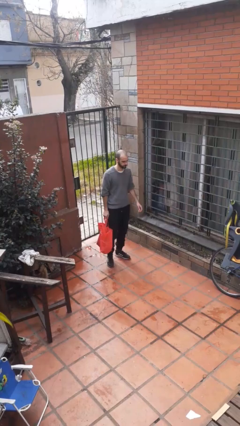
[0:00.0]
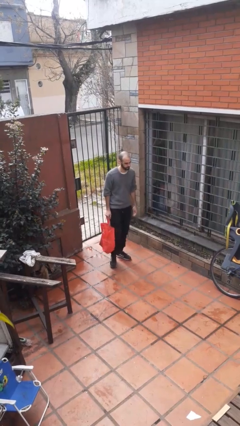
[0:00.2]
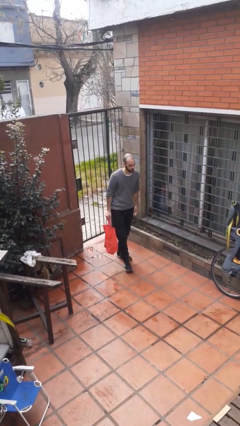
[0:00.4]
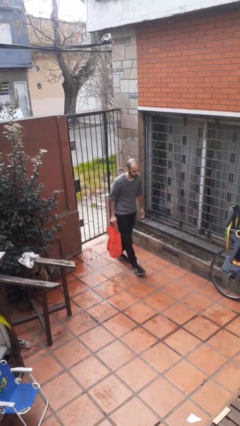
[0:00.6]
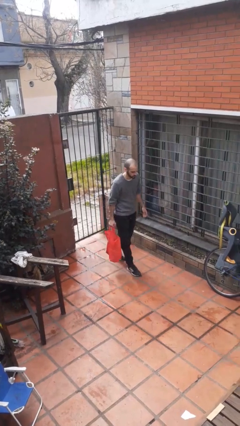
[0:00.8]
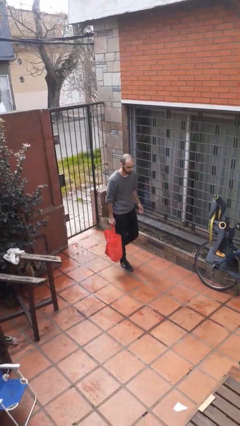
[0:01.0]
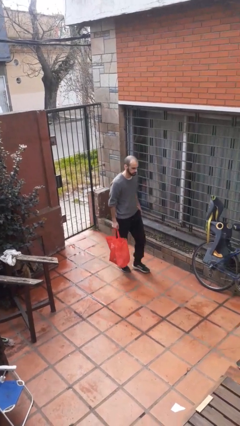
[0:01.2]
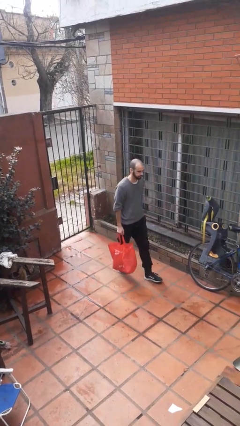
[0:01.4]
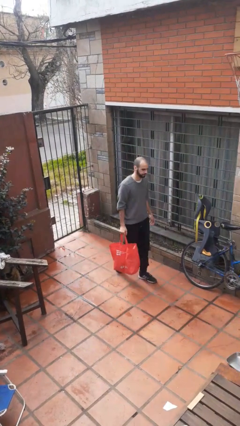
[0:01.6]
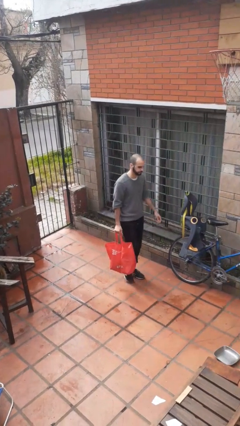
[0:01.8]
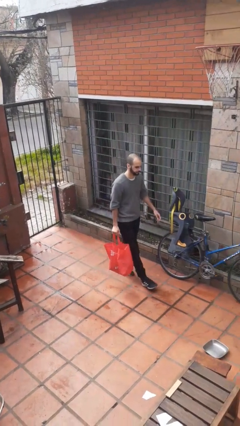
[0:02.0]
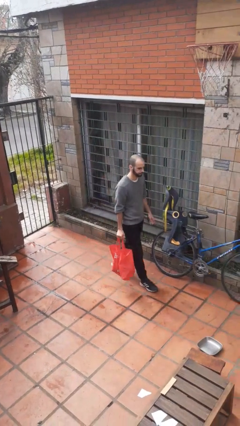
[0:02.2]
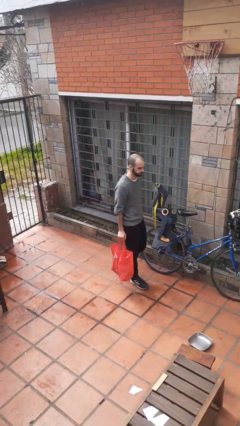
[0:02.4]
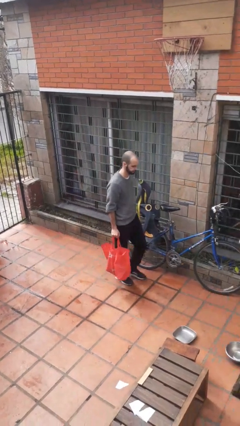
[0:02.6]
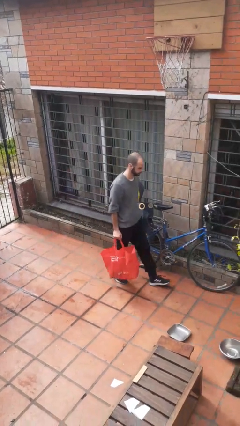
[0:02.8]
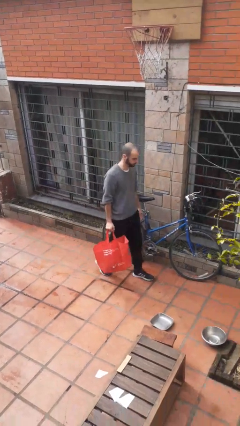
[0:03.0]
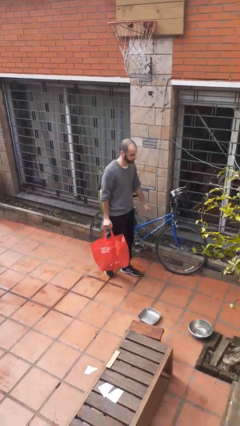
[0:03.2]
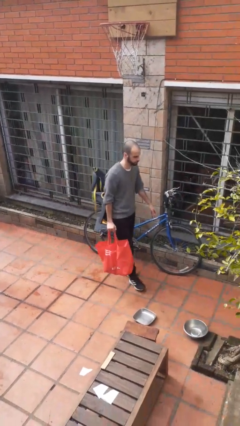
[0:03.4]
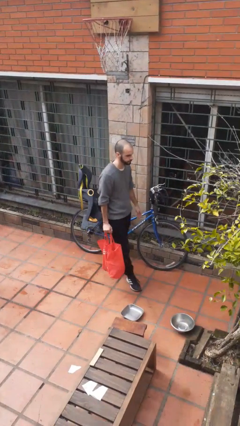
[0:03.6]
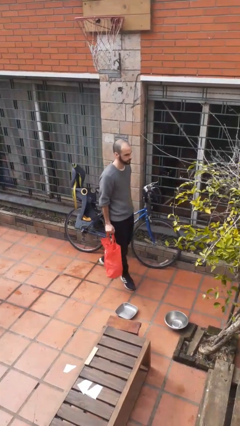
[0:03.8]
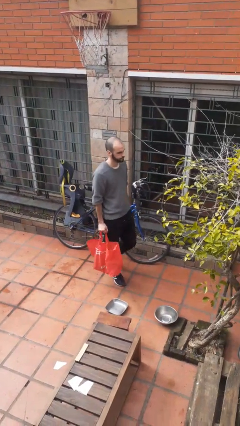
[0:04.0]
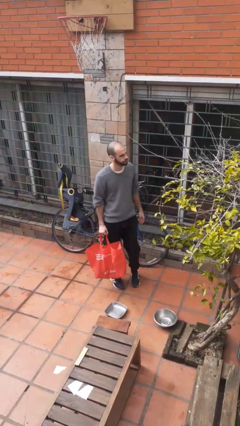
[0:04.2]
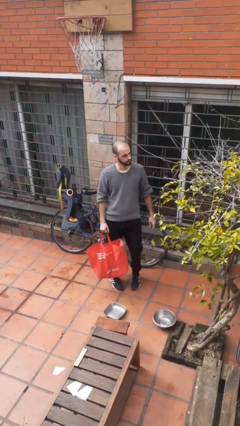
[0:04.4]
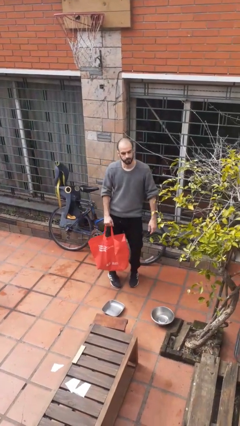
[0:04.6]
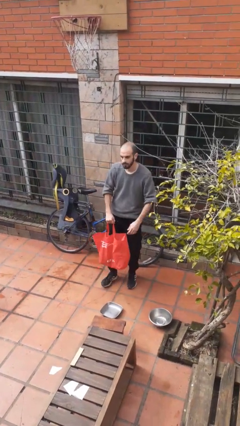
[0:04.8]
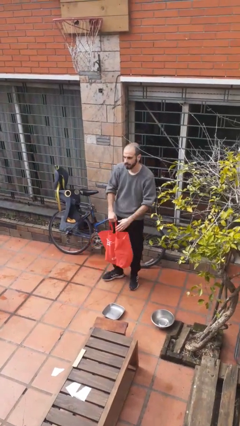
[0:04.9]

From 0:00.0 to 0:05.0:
person carries groceries

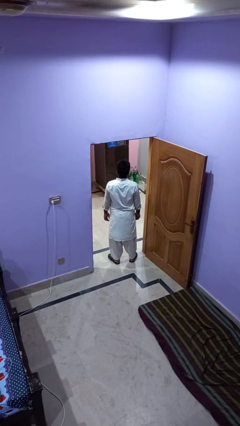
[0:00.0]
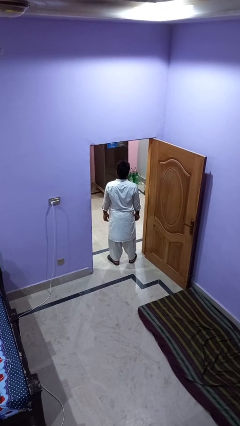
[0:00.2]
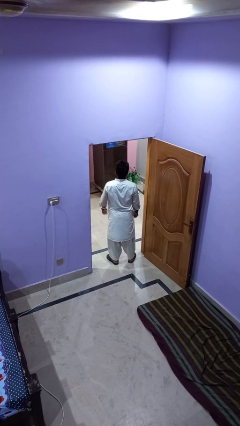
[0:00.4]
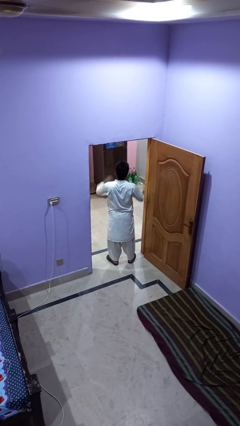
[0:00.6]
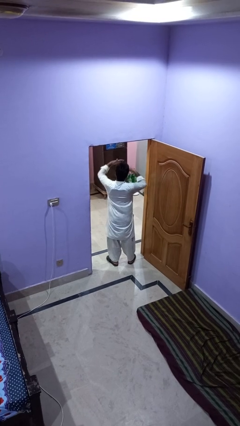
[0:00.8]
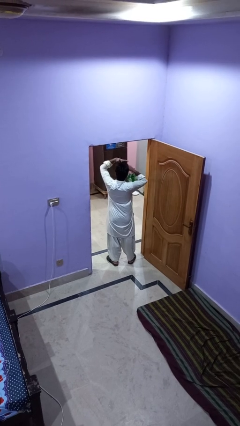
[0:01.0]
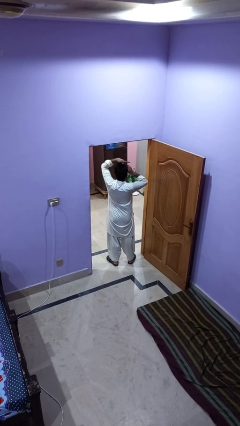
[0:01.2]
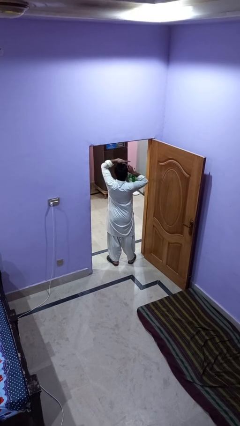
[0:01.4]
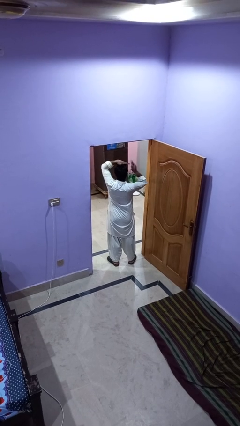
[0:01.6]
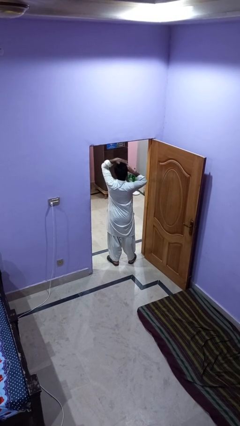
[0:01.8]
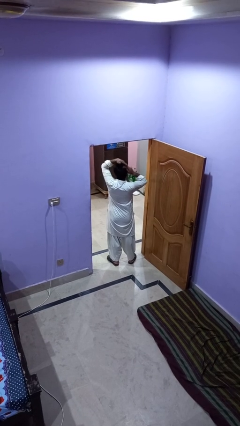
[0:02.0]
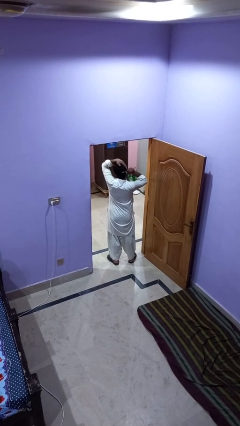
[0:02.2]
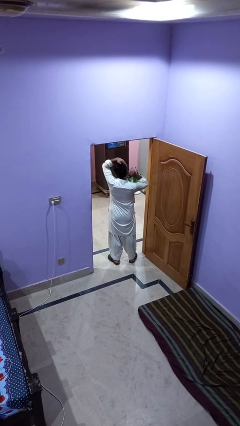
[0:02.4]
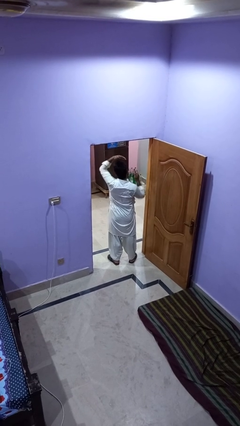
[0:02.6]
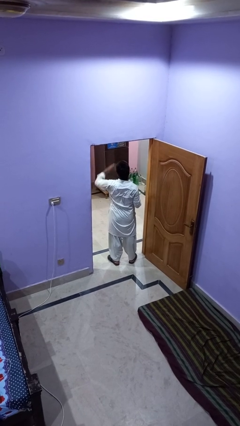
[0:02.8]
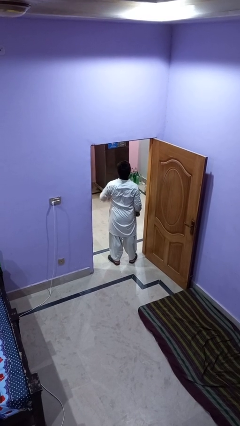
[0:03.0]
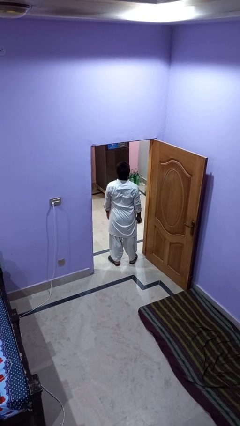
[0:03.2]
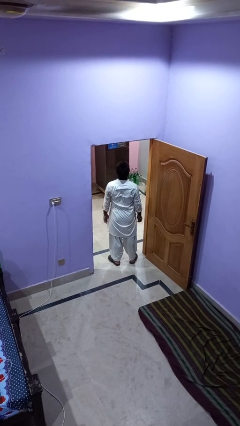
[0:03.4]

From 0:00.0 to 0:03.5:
person brushes hair

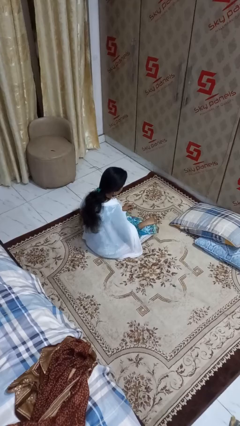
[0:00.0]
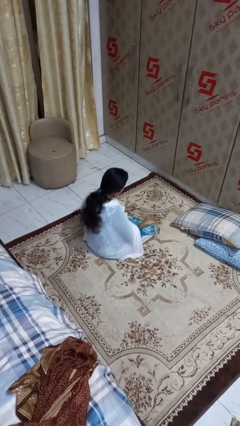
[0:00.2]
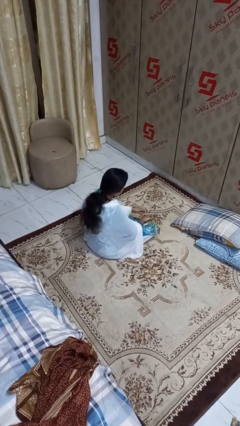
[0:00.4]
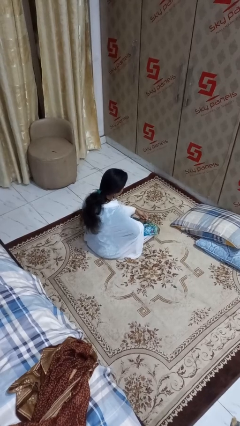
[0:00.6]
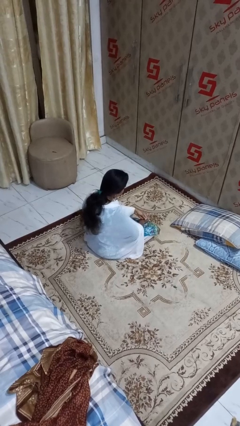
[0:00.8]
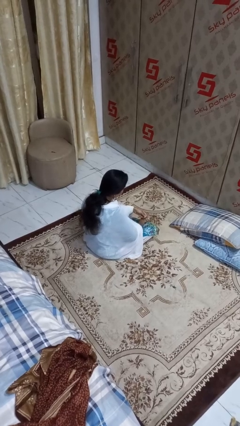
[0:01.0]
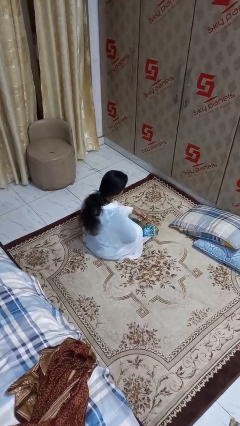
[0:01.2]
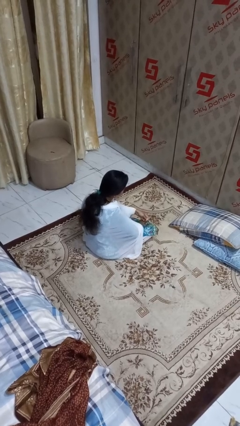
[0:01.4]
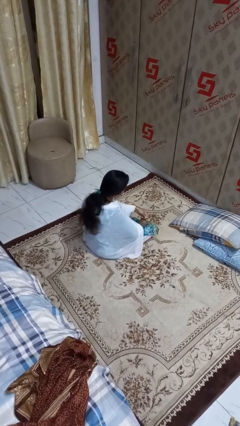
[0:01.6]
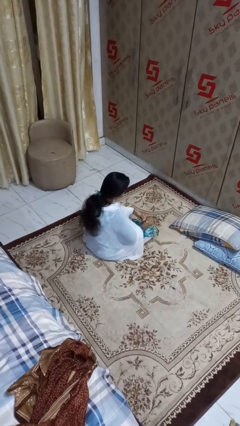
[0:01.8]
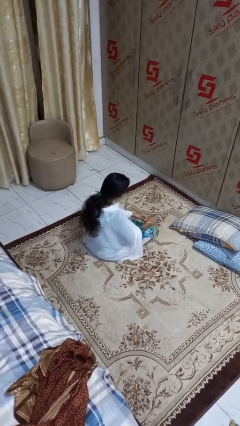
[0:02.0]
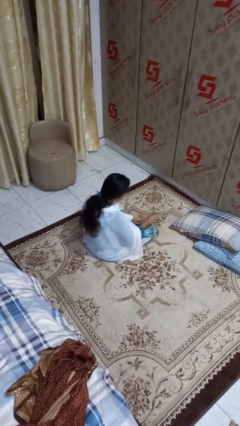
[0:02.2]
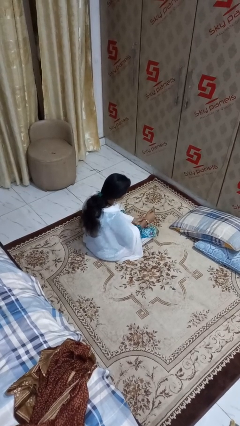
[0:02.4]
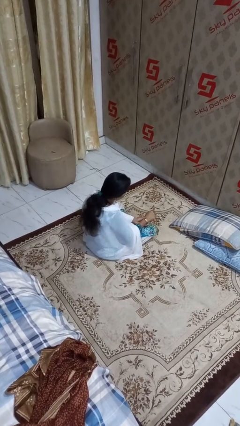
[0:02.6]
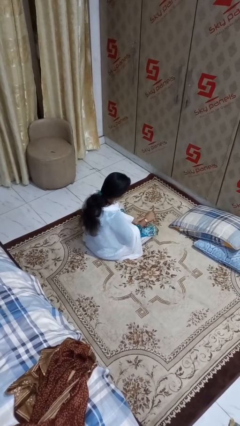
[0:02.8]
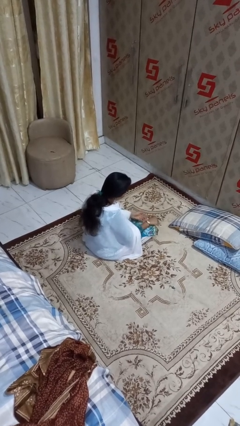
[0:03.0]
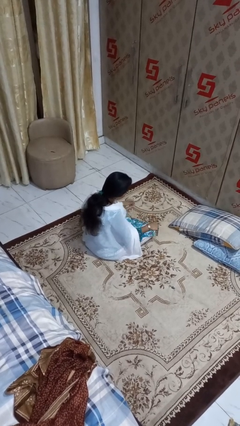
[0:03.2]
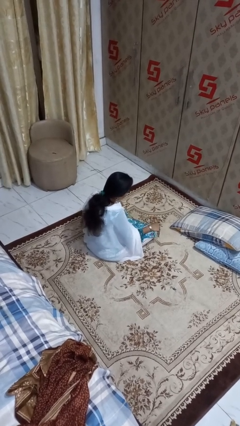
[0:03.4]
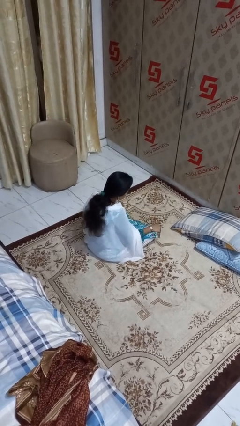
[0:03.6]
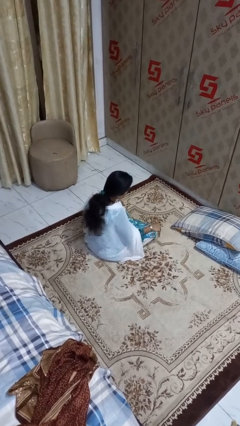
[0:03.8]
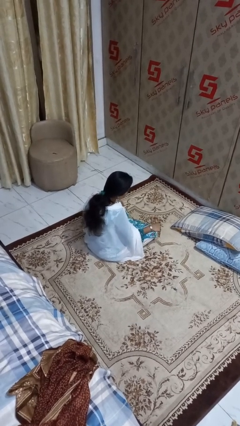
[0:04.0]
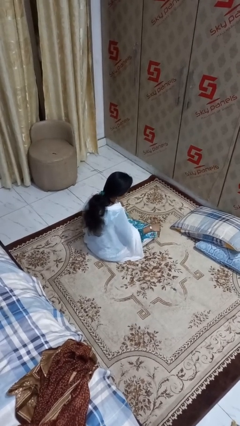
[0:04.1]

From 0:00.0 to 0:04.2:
person puts on wristwatch

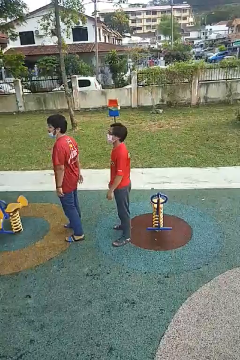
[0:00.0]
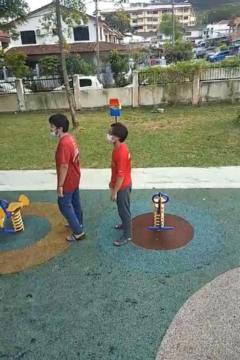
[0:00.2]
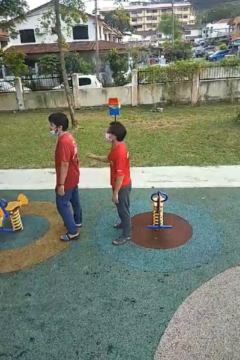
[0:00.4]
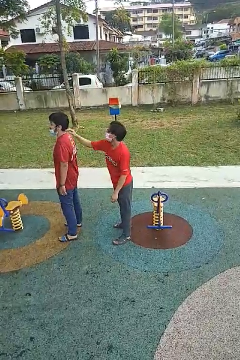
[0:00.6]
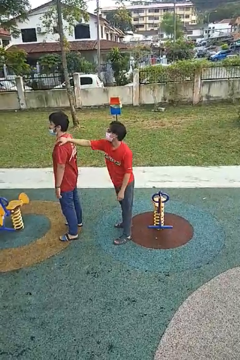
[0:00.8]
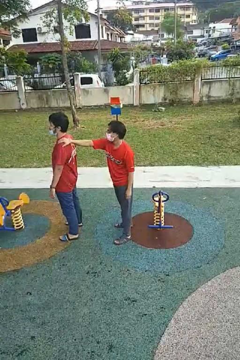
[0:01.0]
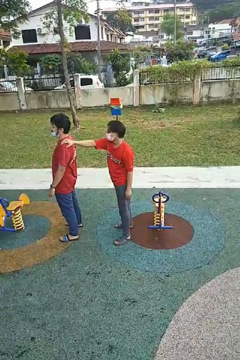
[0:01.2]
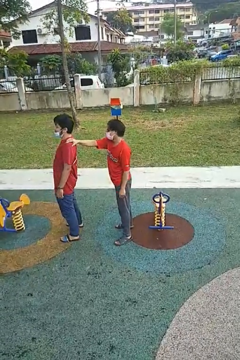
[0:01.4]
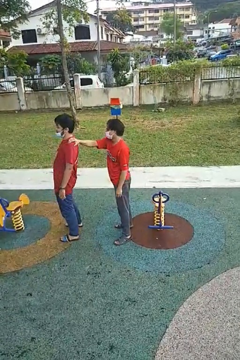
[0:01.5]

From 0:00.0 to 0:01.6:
person grabs person by shoulder

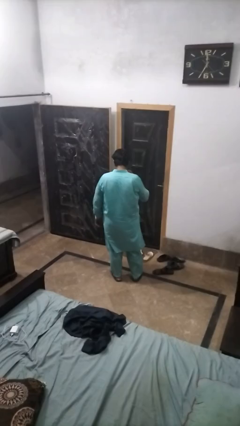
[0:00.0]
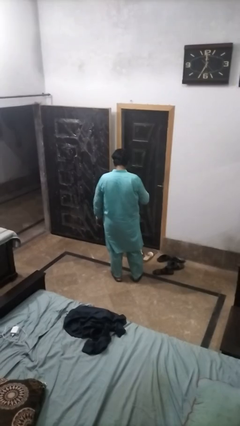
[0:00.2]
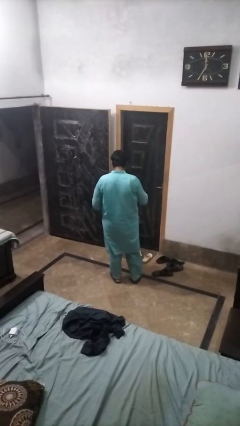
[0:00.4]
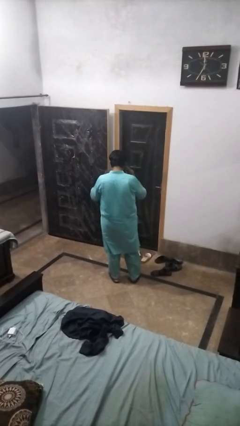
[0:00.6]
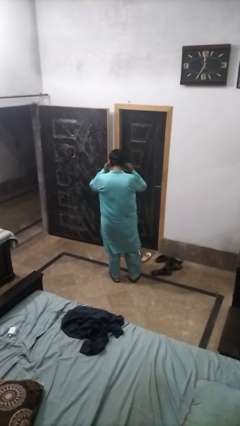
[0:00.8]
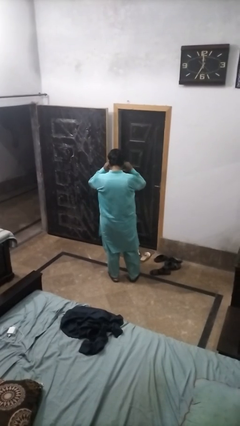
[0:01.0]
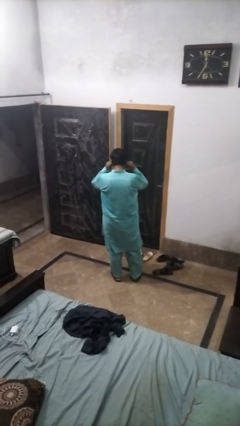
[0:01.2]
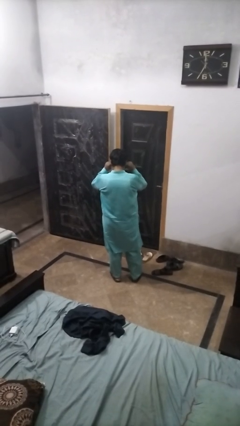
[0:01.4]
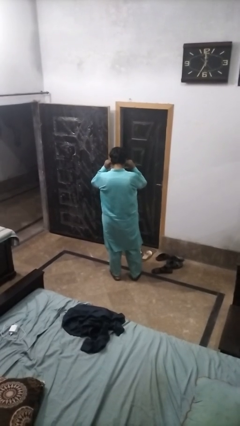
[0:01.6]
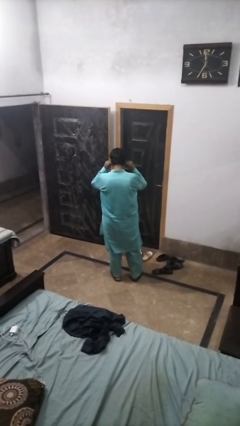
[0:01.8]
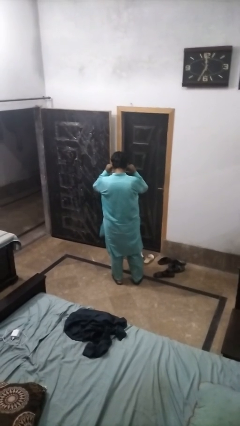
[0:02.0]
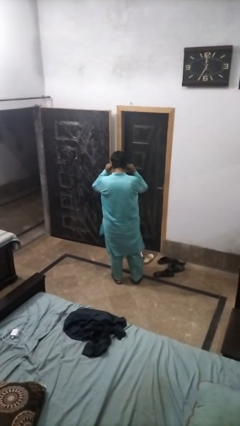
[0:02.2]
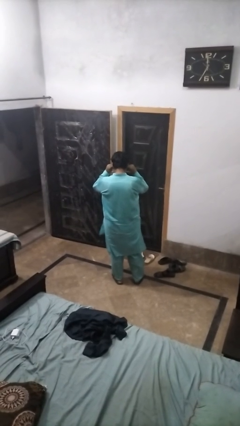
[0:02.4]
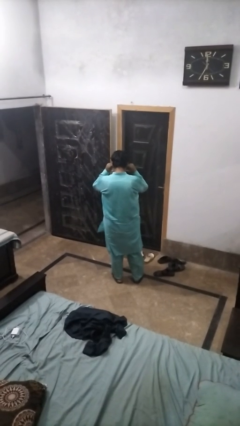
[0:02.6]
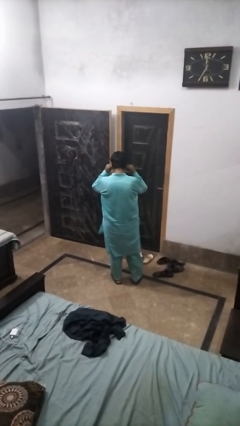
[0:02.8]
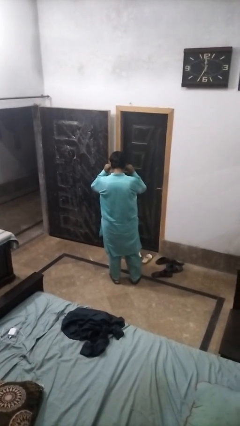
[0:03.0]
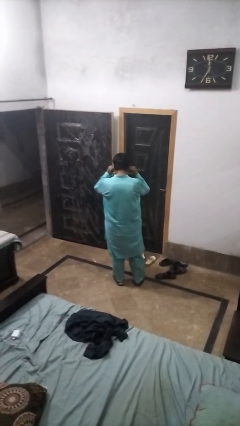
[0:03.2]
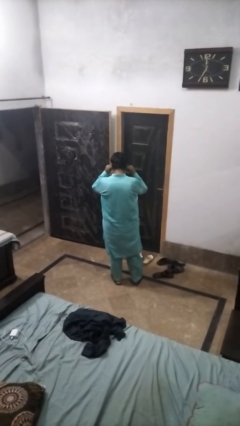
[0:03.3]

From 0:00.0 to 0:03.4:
person puts fingers in ear

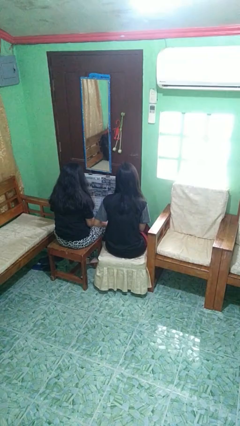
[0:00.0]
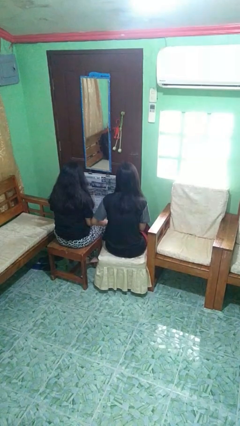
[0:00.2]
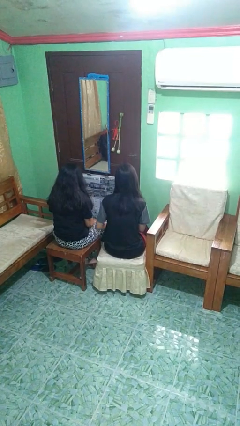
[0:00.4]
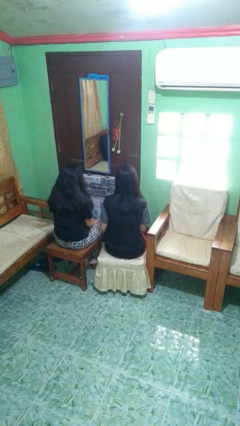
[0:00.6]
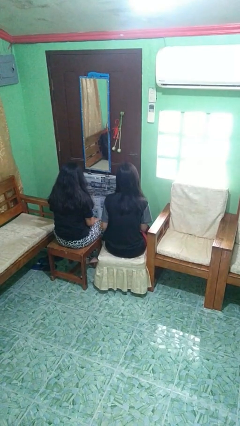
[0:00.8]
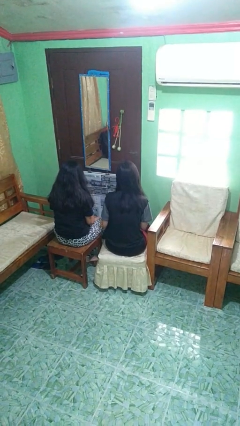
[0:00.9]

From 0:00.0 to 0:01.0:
person nudges person with elbow
